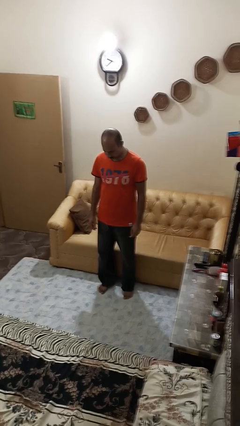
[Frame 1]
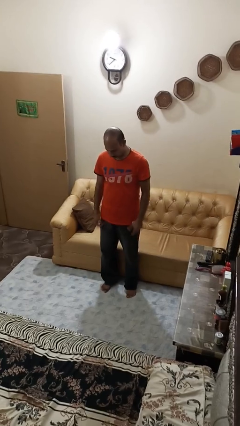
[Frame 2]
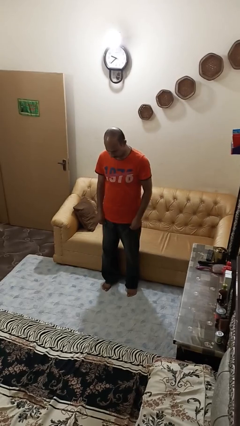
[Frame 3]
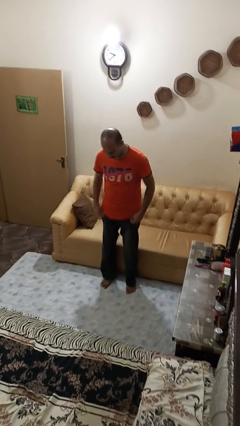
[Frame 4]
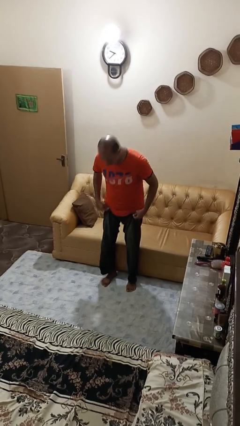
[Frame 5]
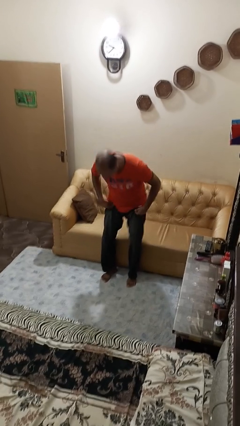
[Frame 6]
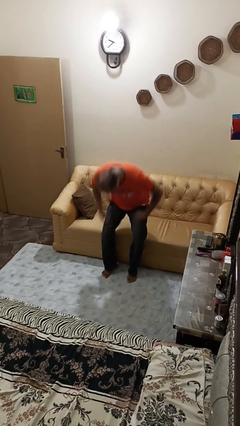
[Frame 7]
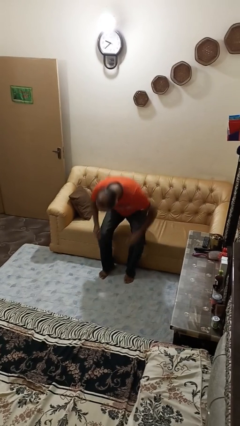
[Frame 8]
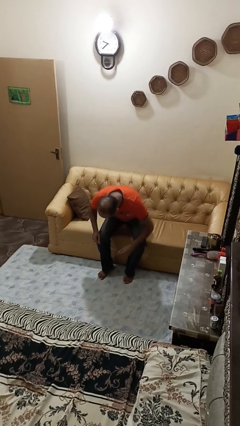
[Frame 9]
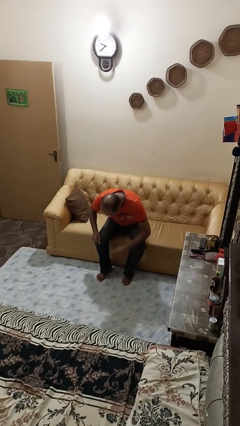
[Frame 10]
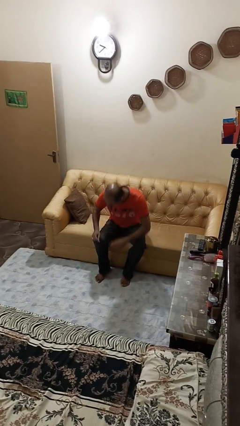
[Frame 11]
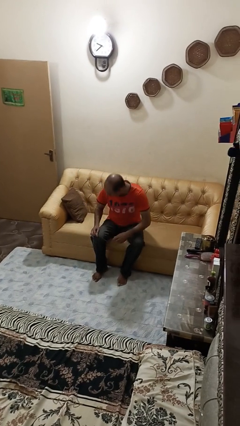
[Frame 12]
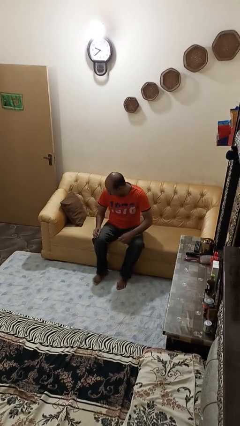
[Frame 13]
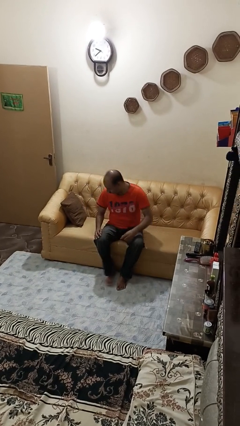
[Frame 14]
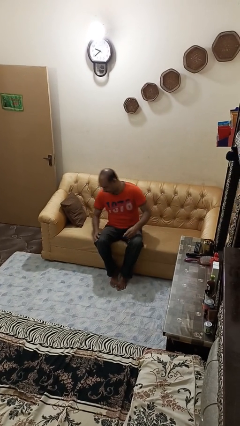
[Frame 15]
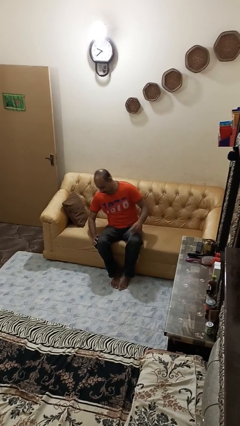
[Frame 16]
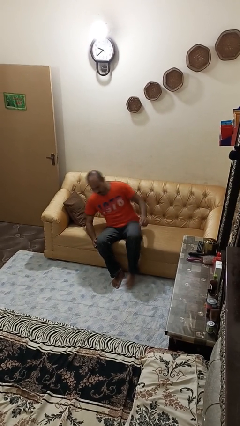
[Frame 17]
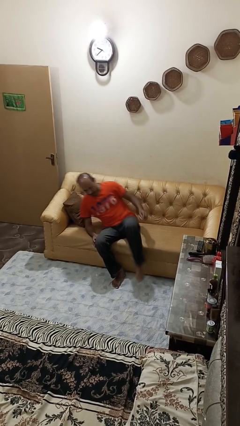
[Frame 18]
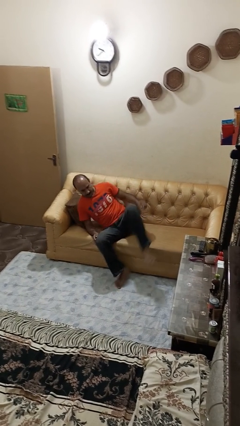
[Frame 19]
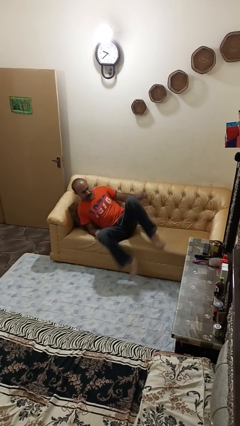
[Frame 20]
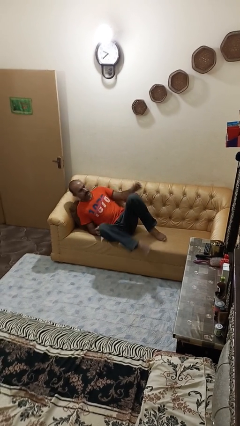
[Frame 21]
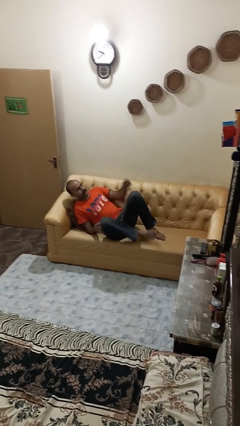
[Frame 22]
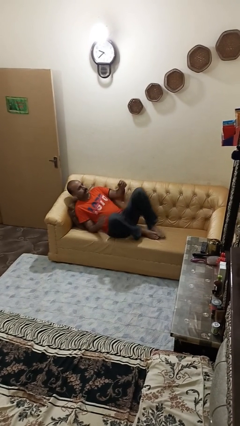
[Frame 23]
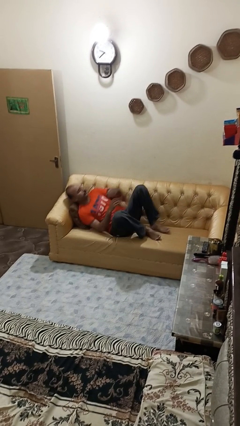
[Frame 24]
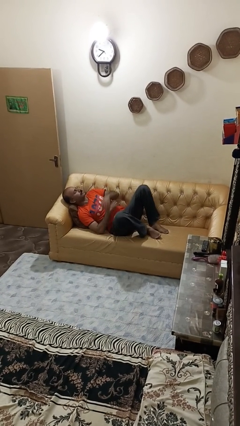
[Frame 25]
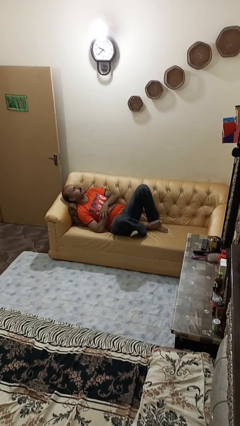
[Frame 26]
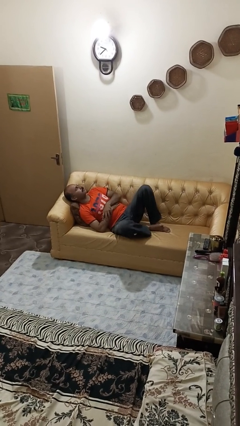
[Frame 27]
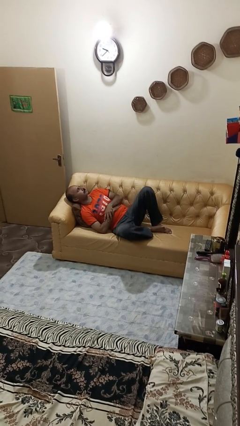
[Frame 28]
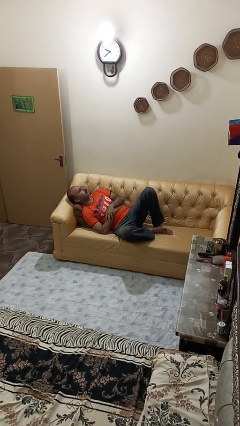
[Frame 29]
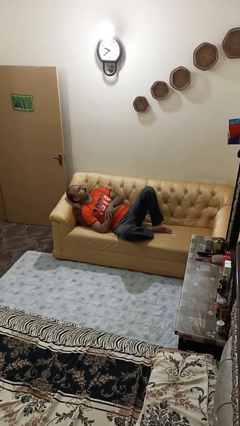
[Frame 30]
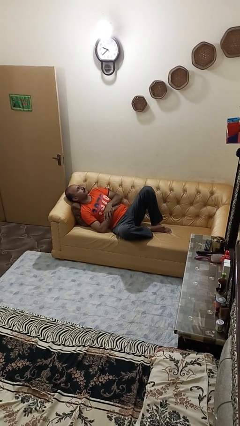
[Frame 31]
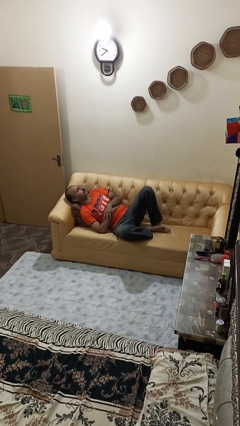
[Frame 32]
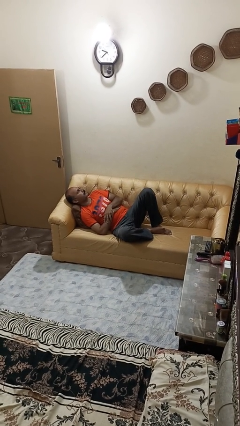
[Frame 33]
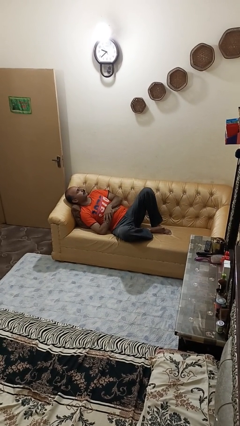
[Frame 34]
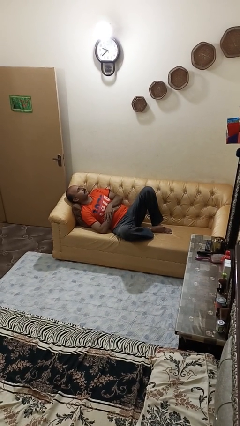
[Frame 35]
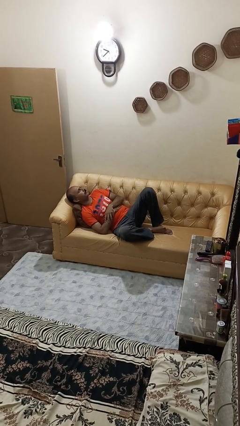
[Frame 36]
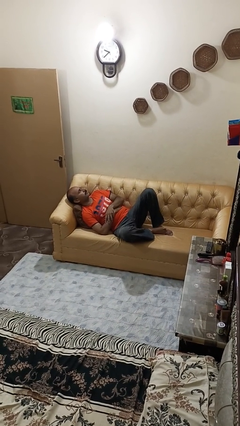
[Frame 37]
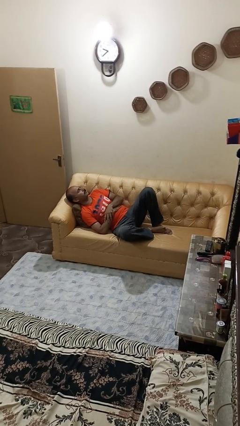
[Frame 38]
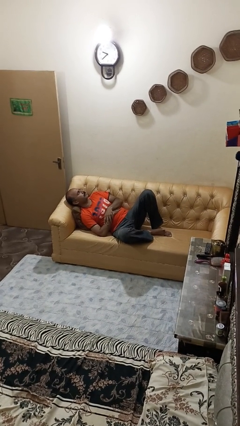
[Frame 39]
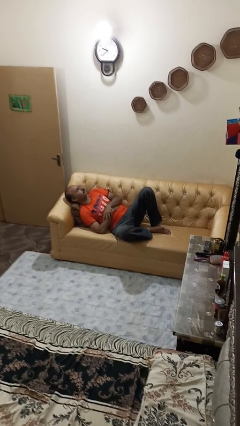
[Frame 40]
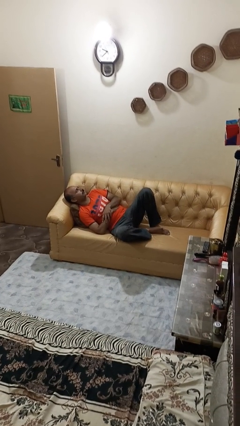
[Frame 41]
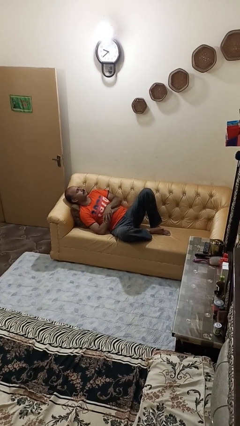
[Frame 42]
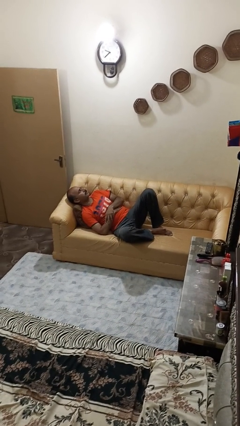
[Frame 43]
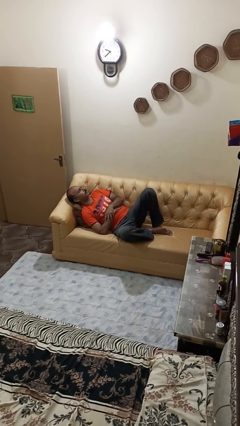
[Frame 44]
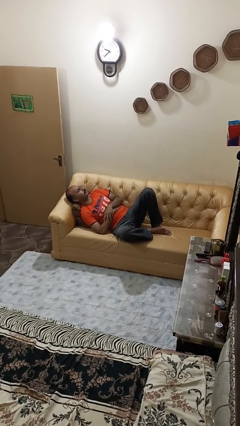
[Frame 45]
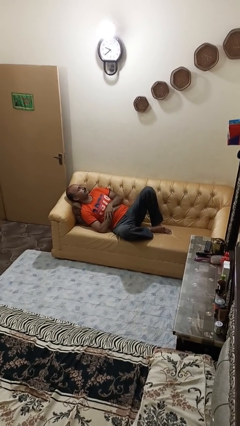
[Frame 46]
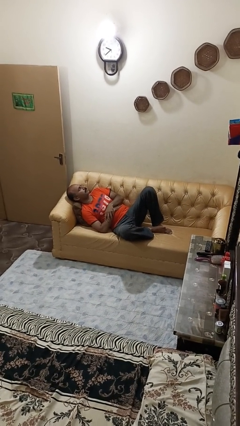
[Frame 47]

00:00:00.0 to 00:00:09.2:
person lies down on couch

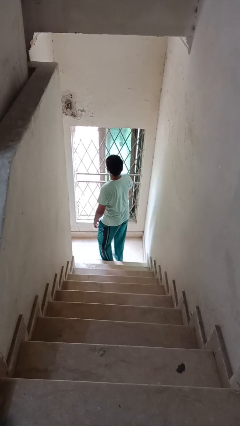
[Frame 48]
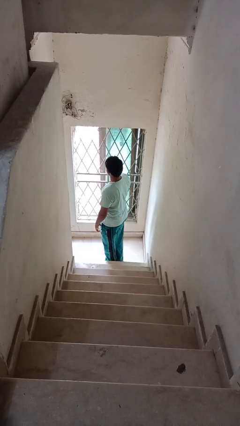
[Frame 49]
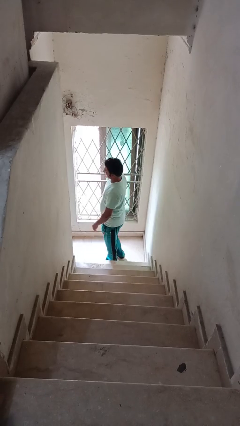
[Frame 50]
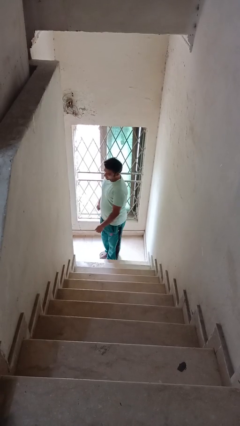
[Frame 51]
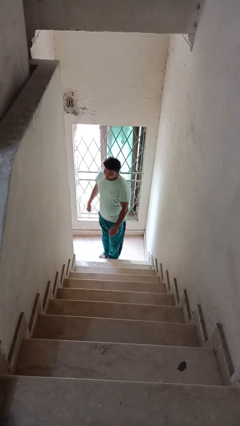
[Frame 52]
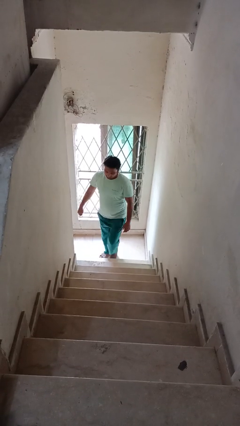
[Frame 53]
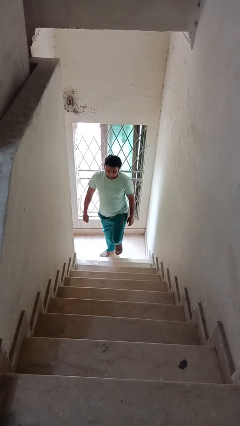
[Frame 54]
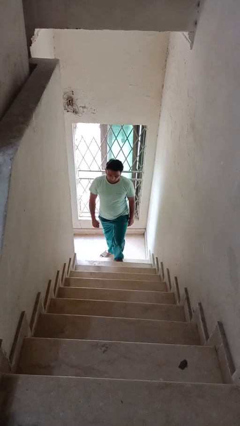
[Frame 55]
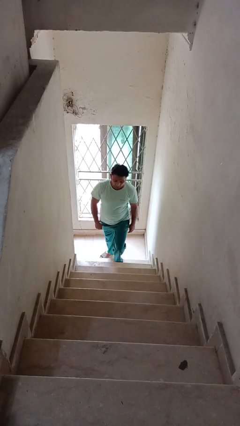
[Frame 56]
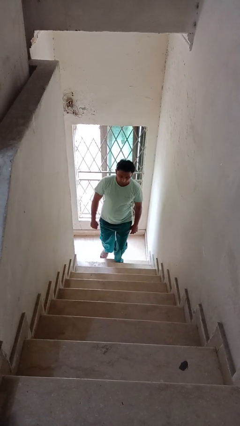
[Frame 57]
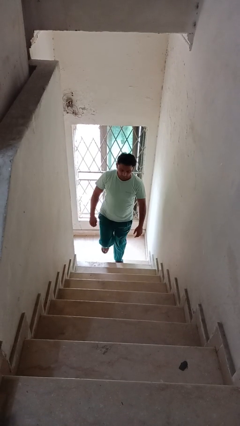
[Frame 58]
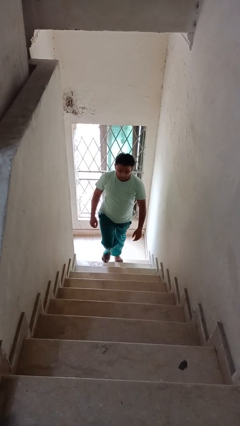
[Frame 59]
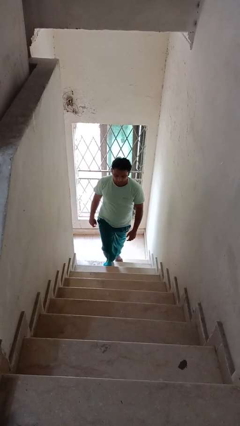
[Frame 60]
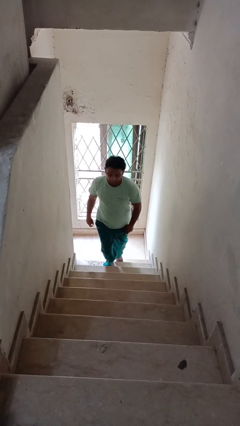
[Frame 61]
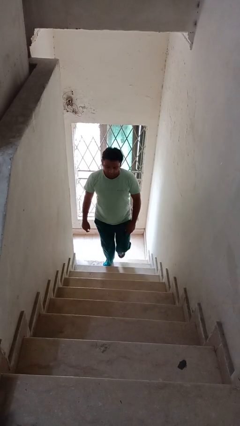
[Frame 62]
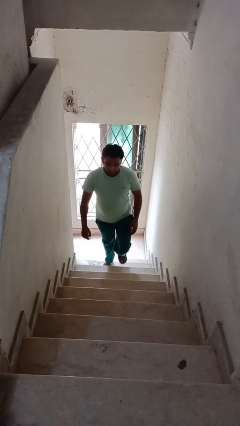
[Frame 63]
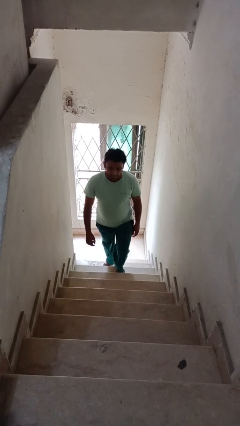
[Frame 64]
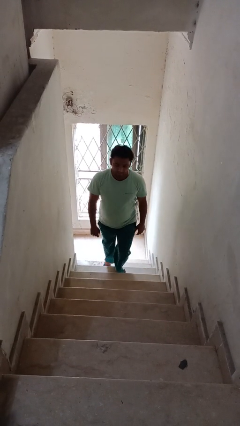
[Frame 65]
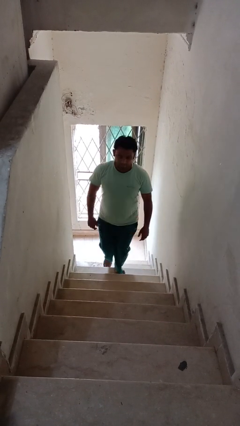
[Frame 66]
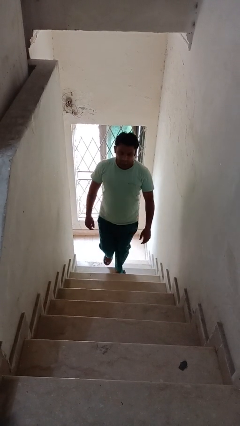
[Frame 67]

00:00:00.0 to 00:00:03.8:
person climbs up stairs

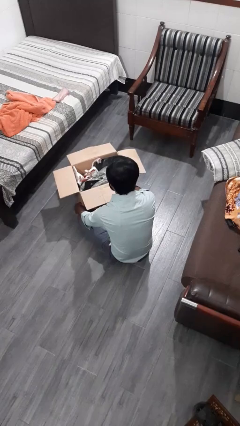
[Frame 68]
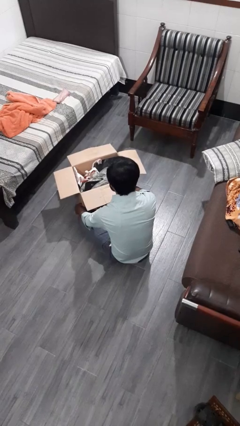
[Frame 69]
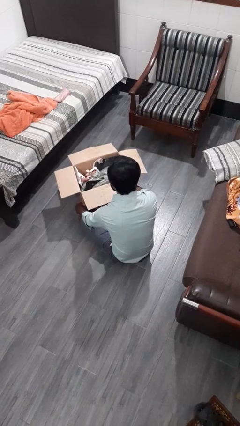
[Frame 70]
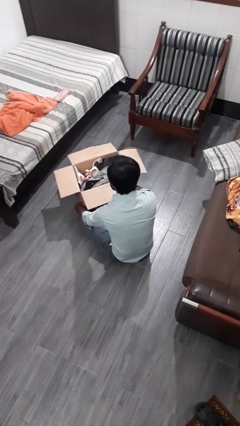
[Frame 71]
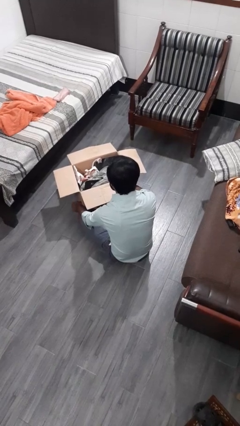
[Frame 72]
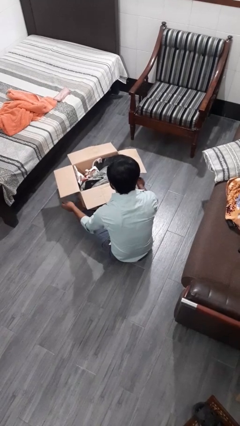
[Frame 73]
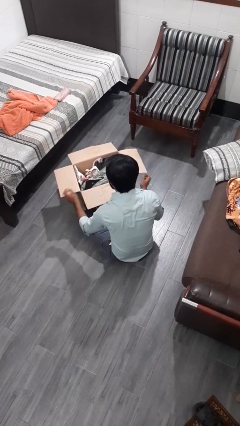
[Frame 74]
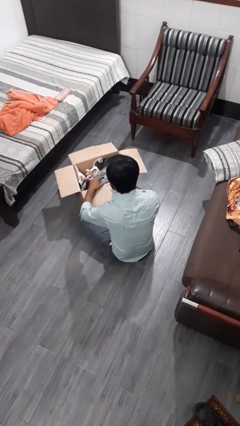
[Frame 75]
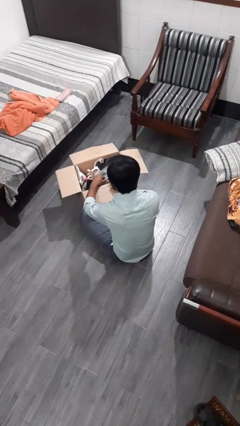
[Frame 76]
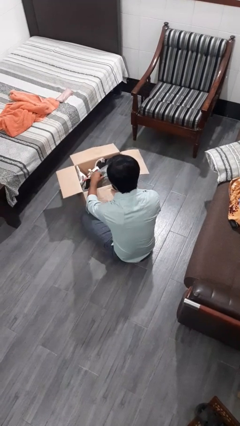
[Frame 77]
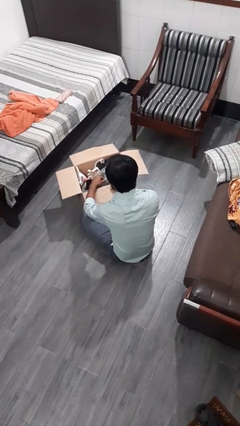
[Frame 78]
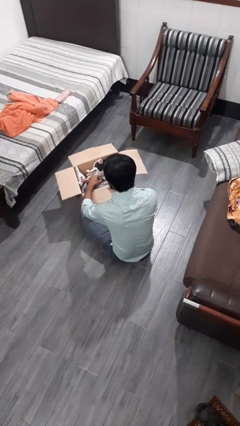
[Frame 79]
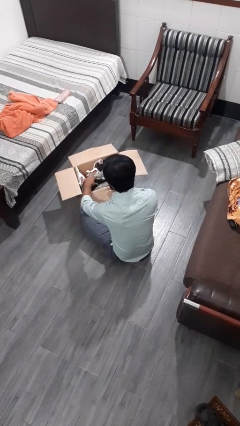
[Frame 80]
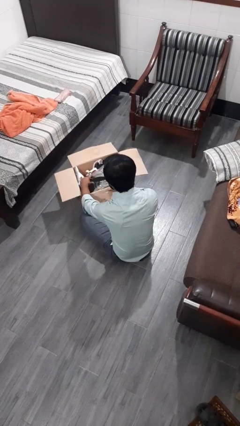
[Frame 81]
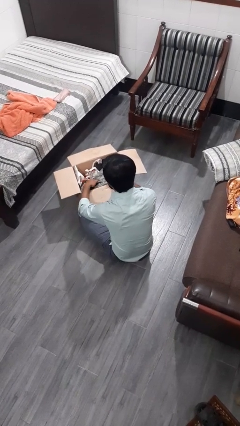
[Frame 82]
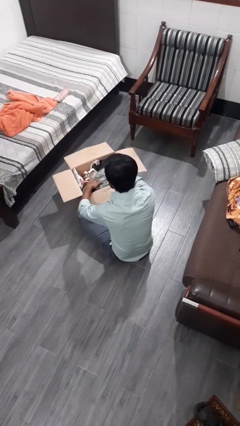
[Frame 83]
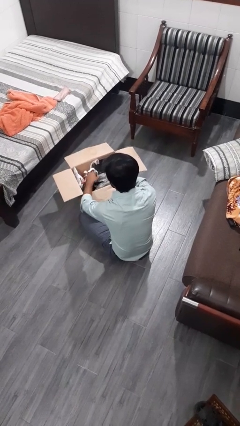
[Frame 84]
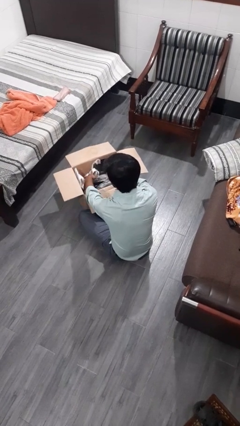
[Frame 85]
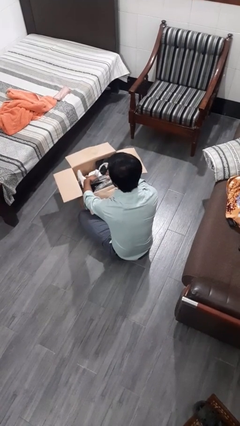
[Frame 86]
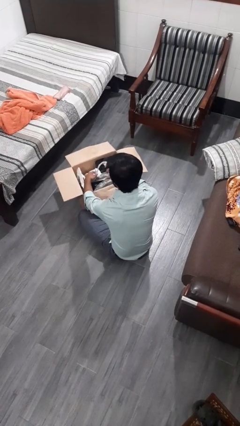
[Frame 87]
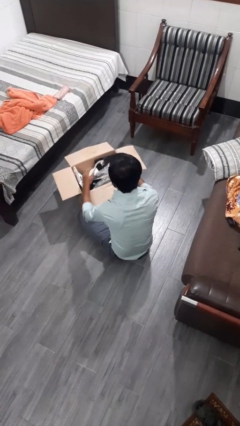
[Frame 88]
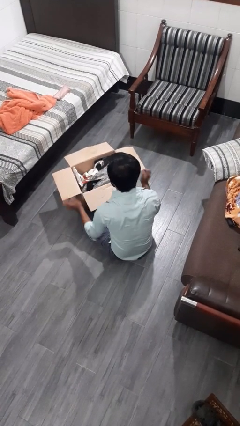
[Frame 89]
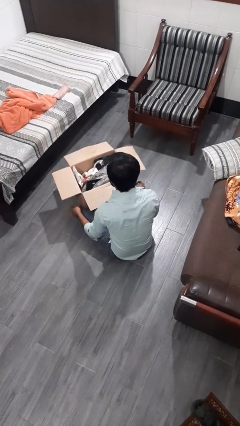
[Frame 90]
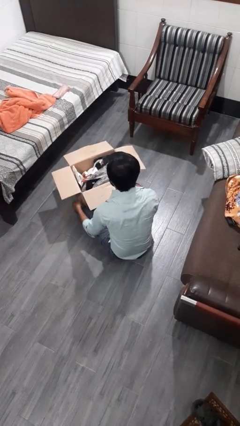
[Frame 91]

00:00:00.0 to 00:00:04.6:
person searches in box

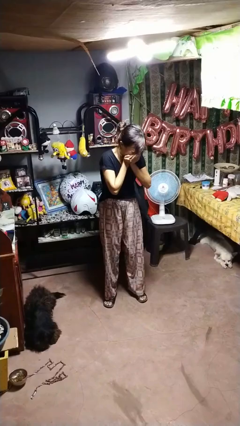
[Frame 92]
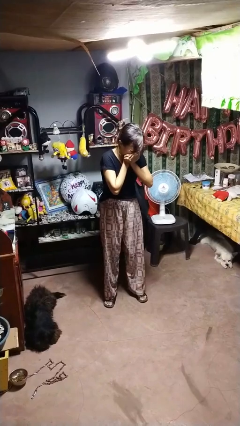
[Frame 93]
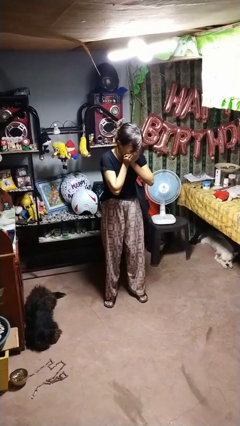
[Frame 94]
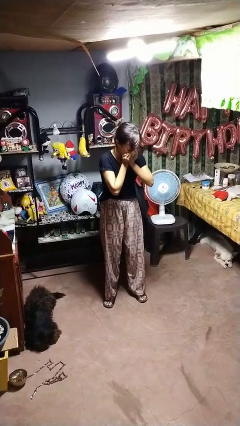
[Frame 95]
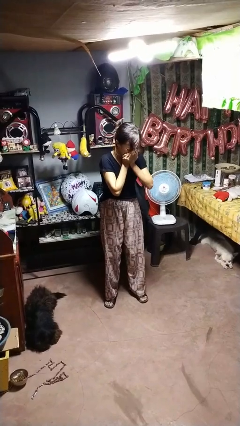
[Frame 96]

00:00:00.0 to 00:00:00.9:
person sneezes into hand
